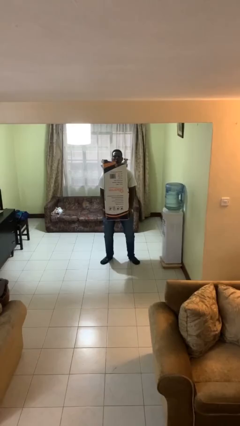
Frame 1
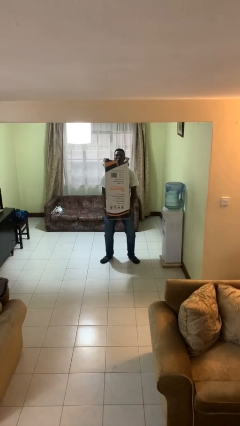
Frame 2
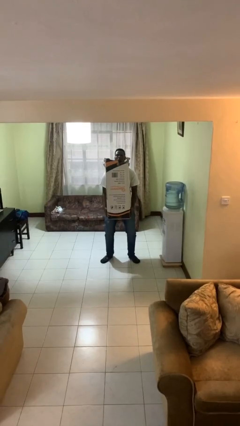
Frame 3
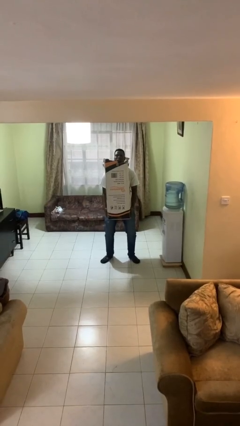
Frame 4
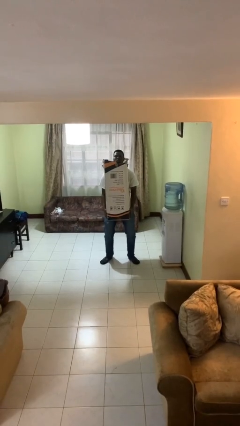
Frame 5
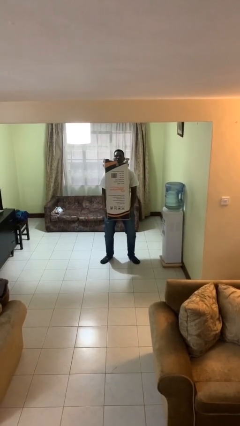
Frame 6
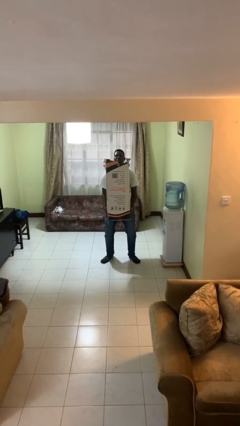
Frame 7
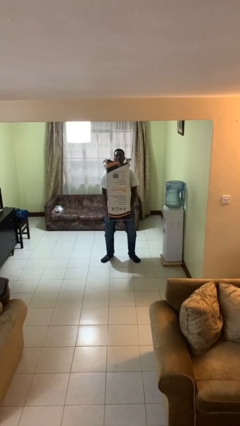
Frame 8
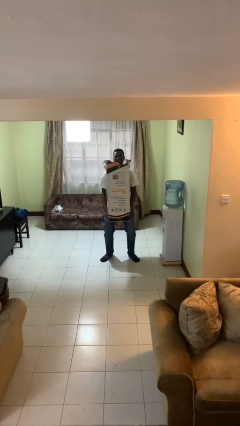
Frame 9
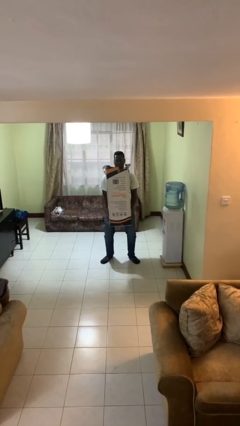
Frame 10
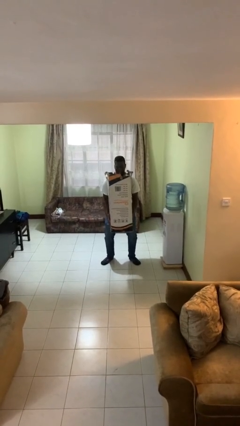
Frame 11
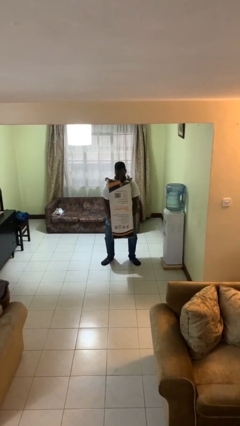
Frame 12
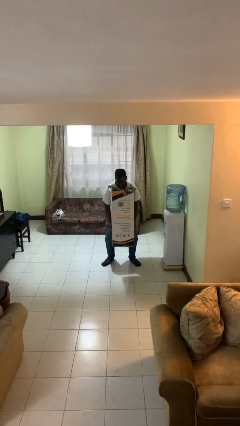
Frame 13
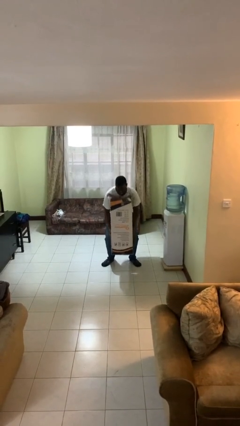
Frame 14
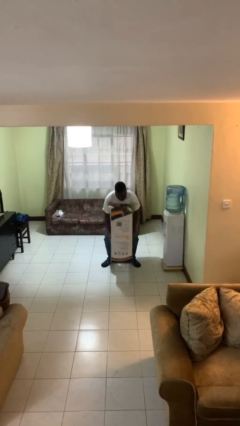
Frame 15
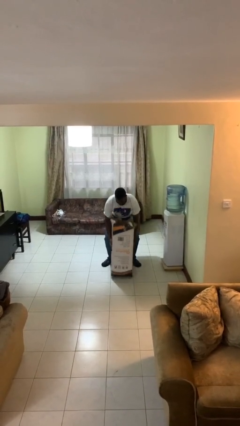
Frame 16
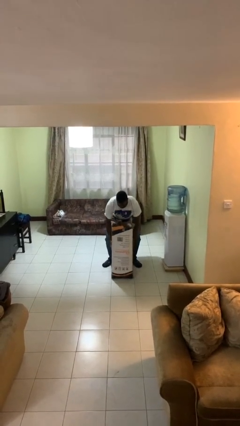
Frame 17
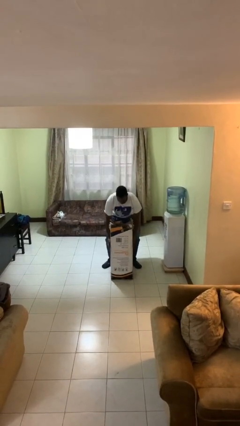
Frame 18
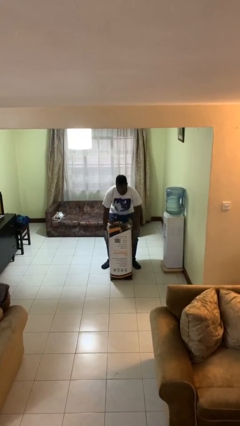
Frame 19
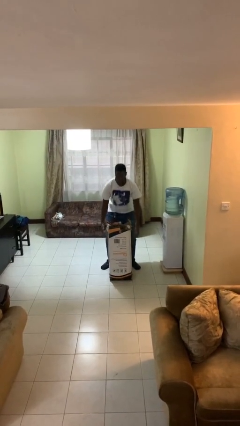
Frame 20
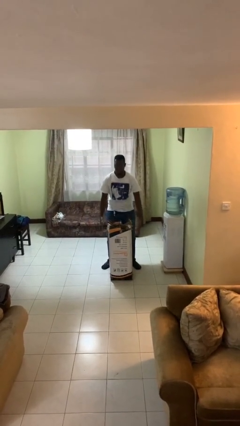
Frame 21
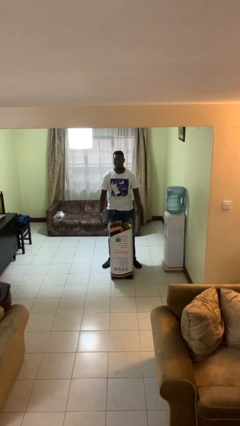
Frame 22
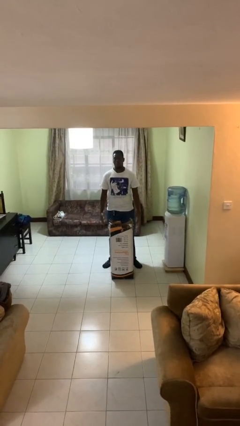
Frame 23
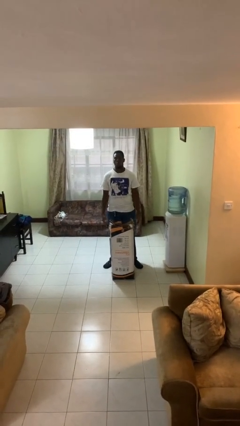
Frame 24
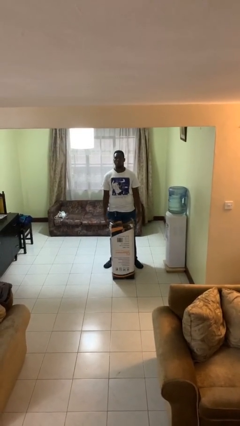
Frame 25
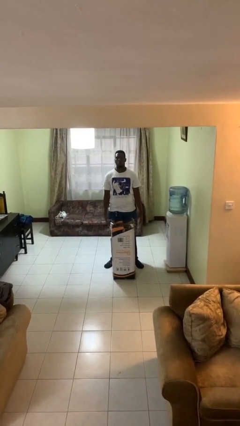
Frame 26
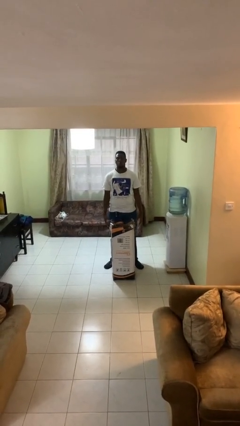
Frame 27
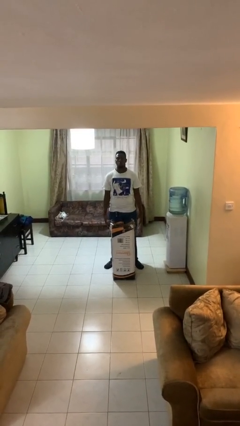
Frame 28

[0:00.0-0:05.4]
person puts down object on floor

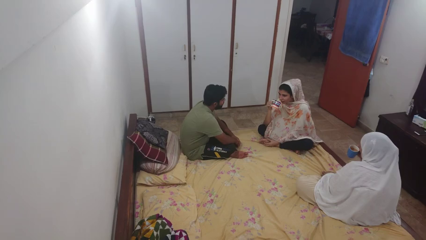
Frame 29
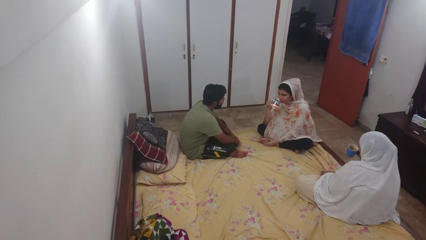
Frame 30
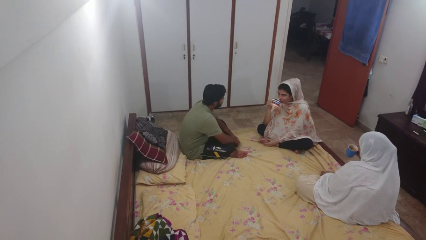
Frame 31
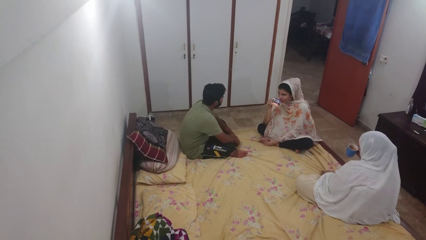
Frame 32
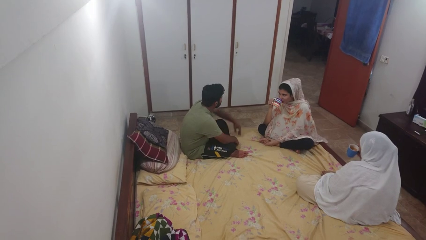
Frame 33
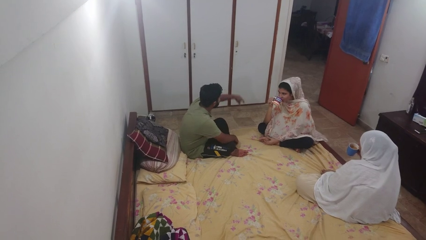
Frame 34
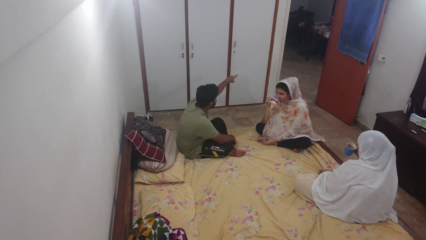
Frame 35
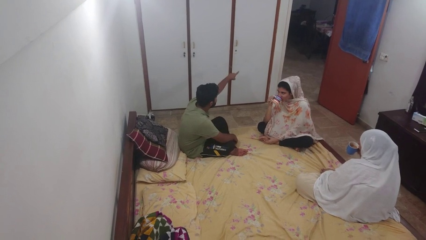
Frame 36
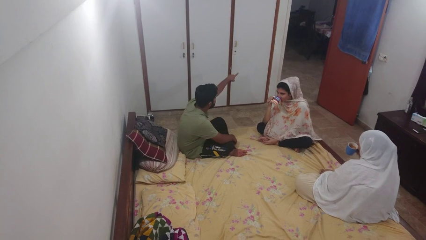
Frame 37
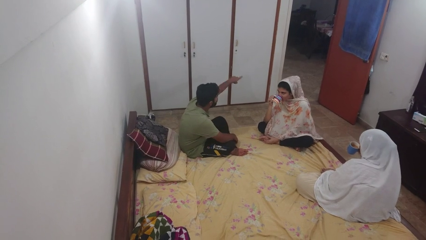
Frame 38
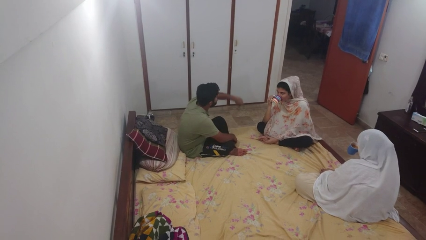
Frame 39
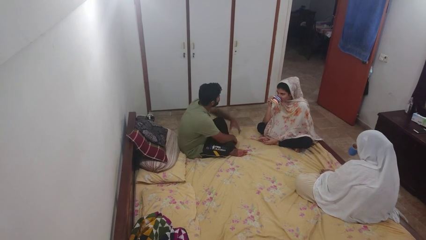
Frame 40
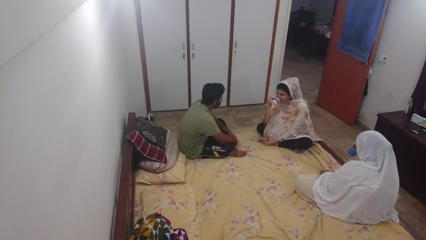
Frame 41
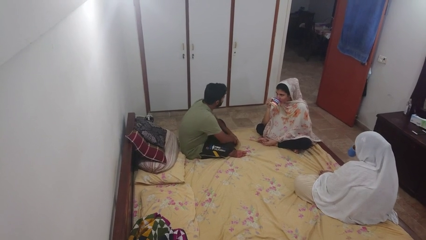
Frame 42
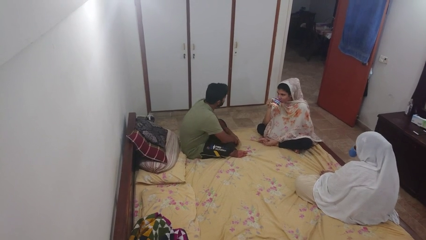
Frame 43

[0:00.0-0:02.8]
person points at person

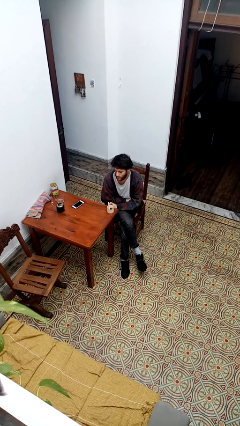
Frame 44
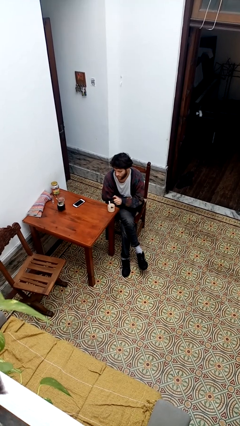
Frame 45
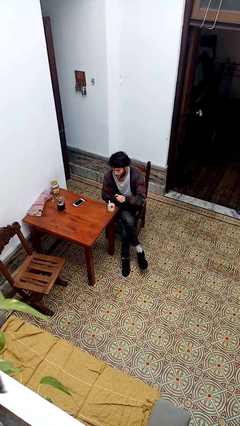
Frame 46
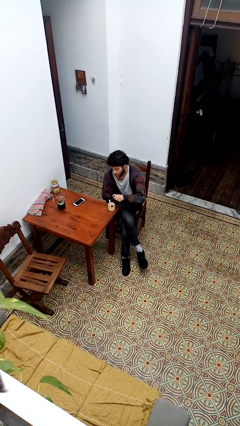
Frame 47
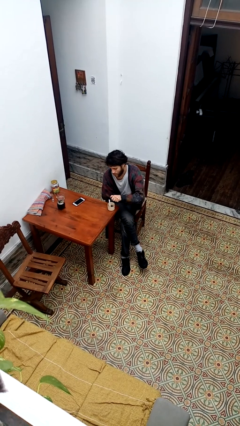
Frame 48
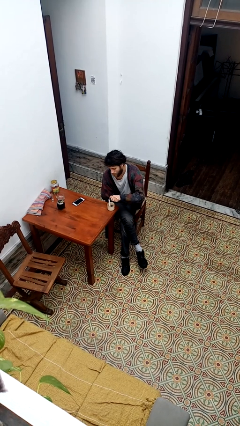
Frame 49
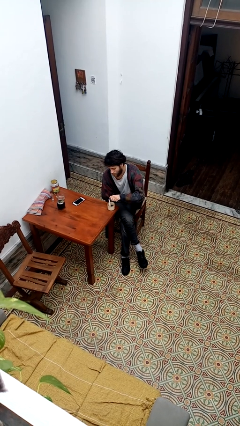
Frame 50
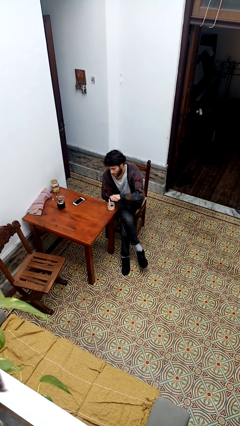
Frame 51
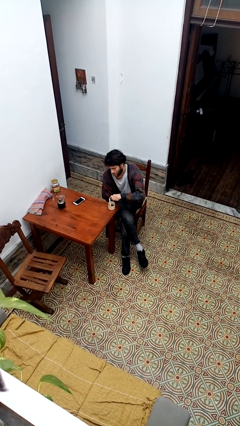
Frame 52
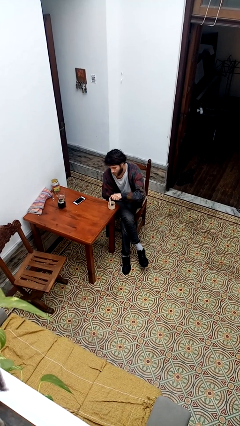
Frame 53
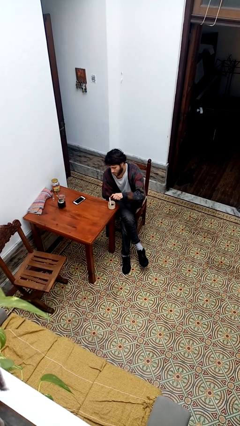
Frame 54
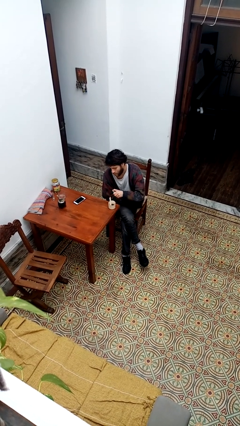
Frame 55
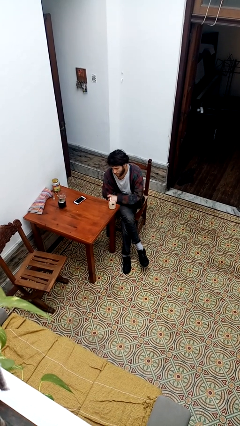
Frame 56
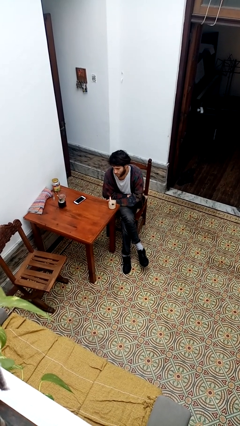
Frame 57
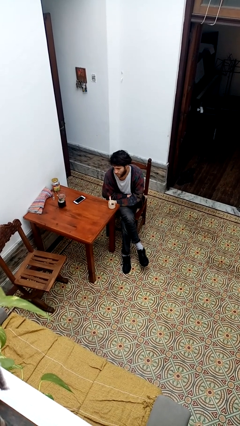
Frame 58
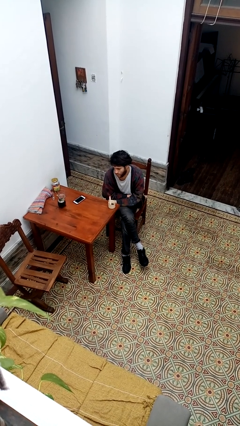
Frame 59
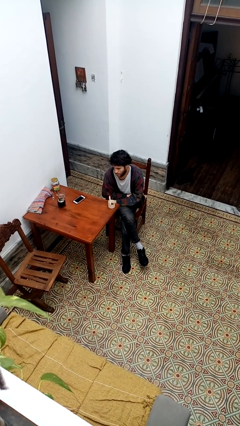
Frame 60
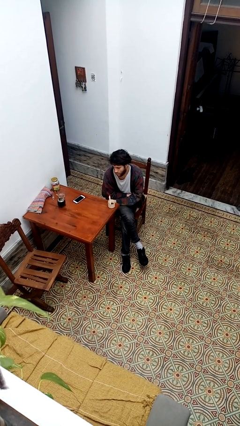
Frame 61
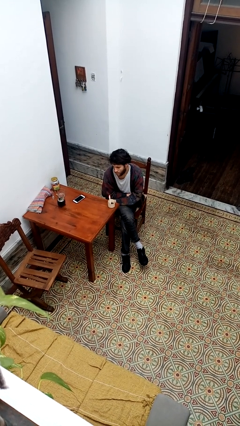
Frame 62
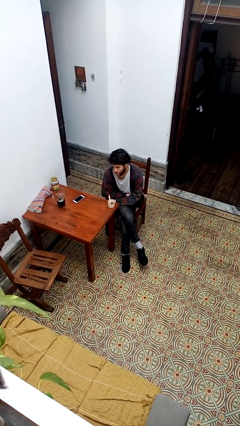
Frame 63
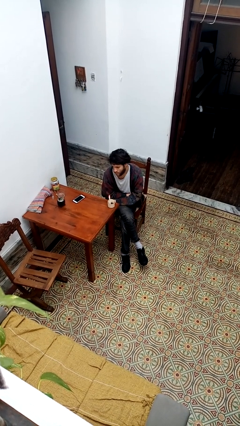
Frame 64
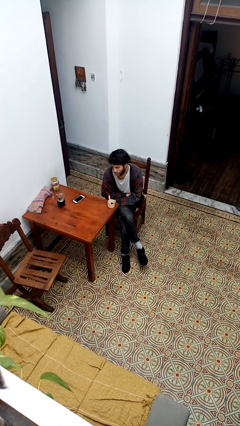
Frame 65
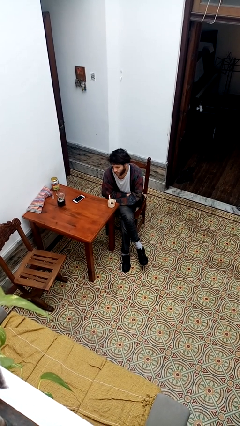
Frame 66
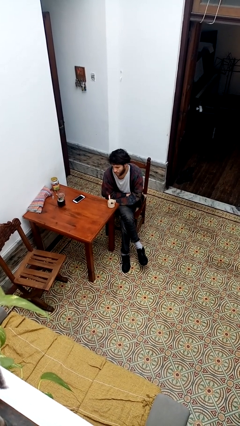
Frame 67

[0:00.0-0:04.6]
person lights candle

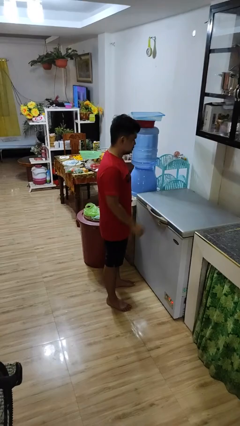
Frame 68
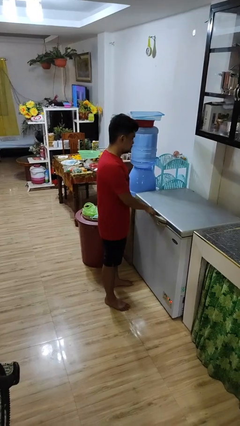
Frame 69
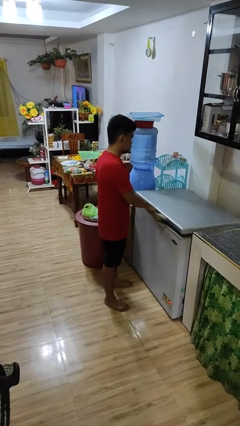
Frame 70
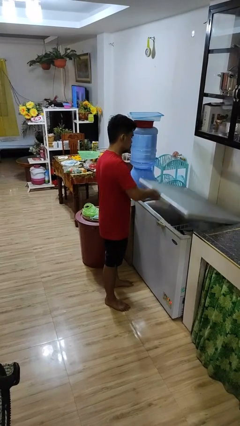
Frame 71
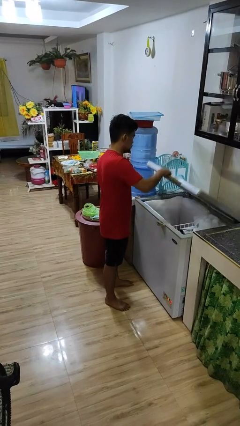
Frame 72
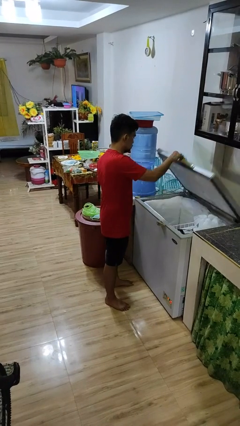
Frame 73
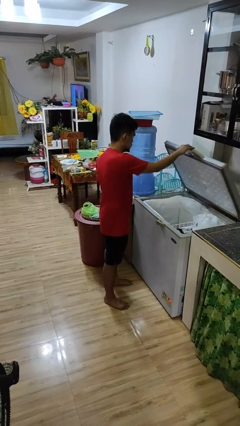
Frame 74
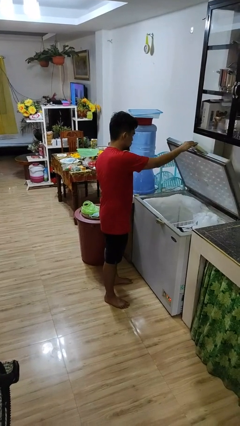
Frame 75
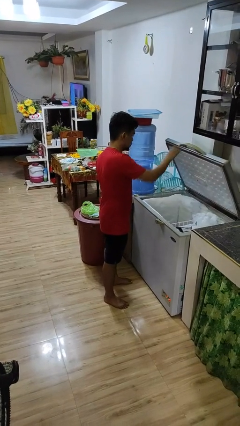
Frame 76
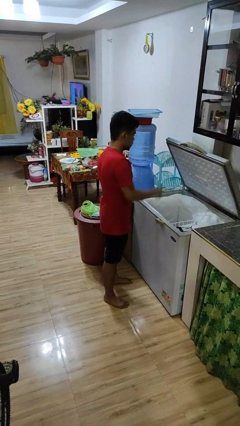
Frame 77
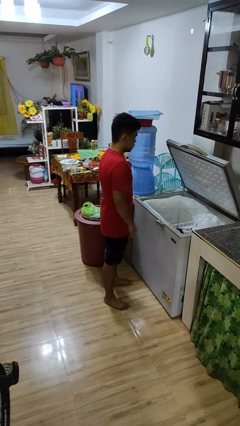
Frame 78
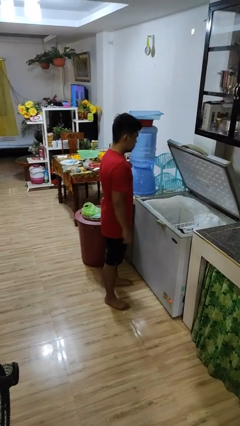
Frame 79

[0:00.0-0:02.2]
person opens refrigerator

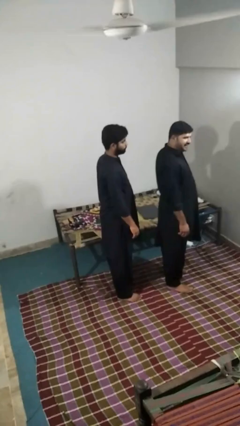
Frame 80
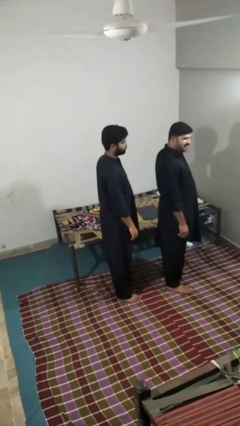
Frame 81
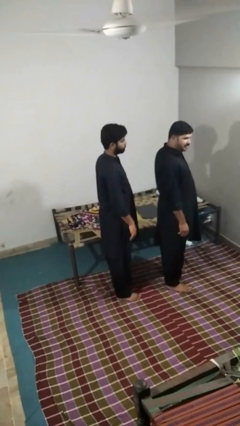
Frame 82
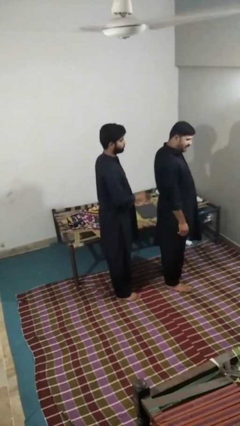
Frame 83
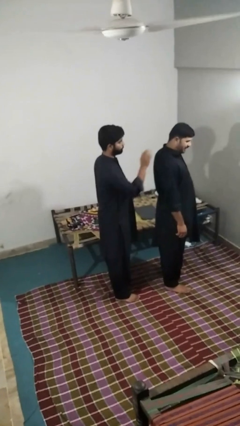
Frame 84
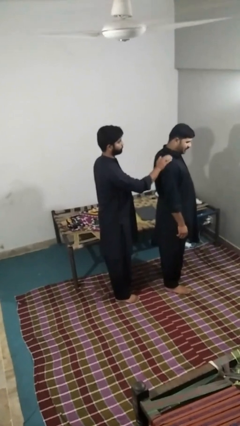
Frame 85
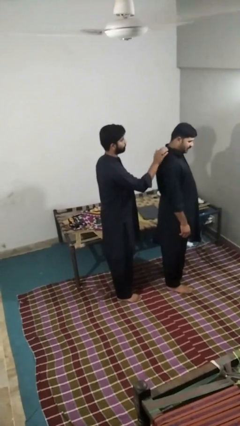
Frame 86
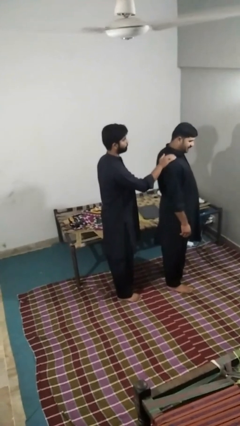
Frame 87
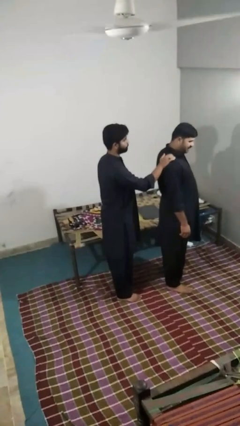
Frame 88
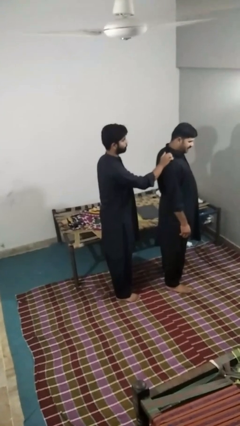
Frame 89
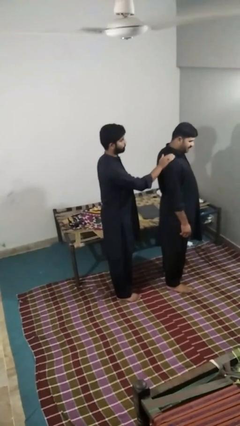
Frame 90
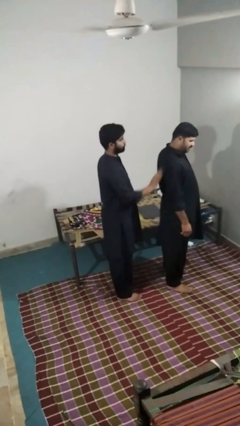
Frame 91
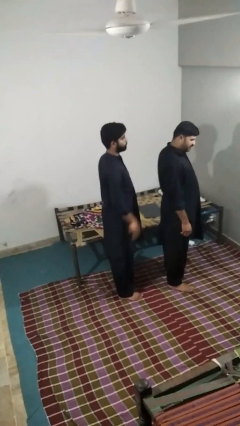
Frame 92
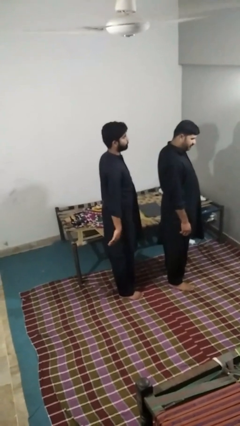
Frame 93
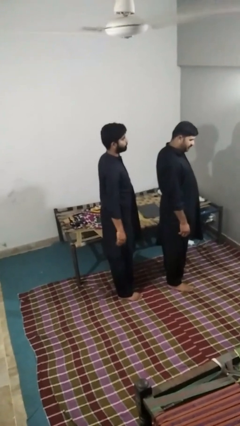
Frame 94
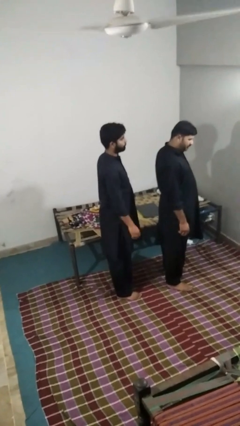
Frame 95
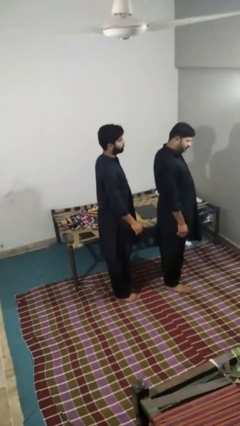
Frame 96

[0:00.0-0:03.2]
person touches back of person
